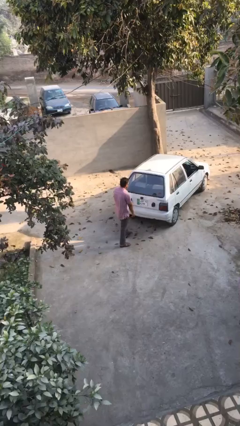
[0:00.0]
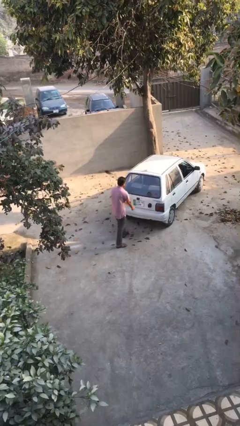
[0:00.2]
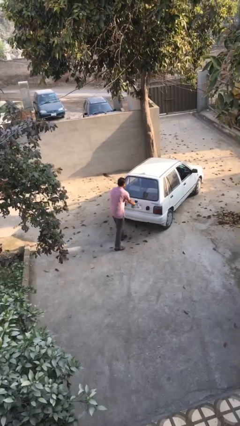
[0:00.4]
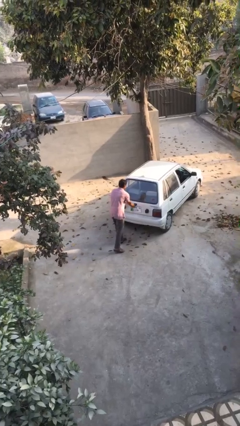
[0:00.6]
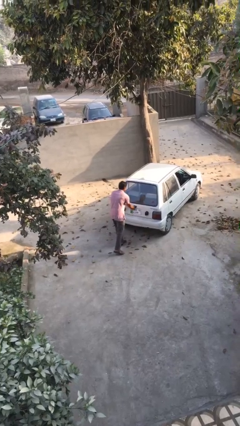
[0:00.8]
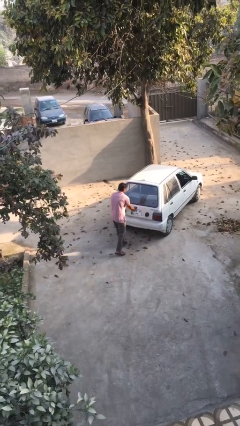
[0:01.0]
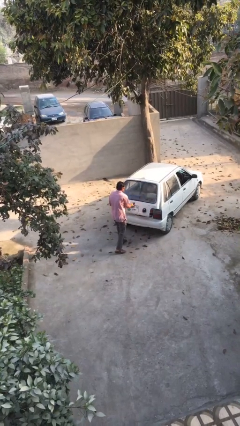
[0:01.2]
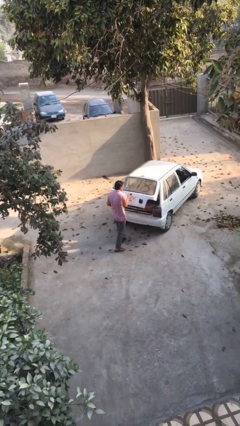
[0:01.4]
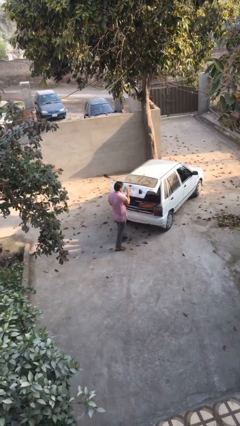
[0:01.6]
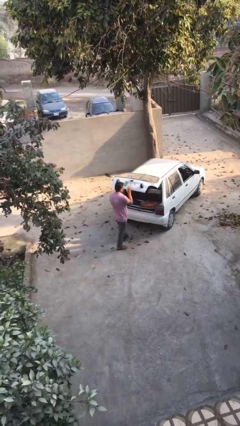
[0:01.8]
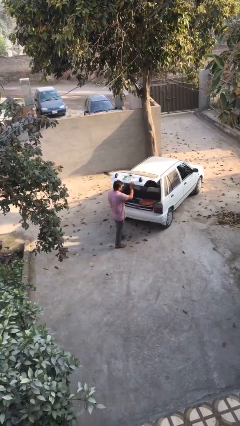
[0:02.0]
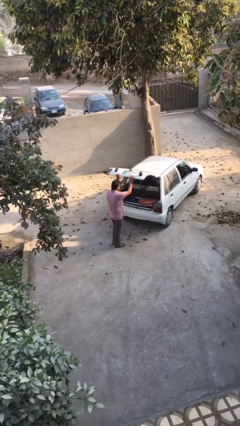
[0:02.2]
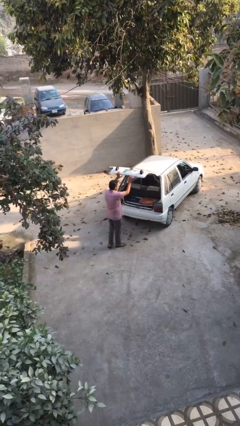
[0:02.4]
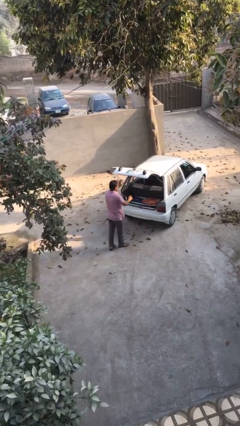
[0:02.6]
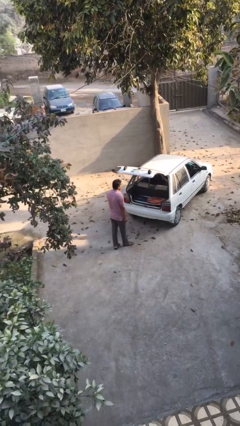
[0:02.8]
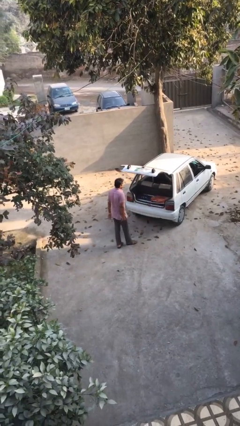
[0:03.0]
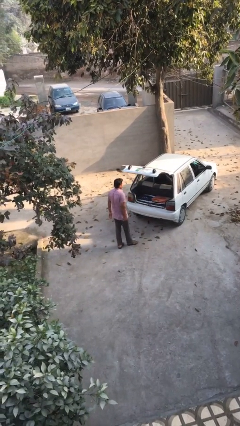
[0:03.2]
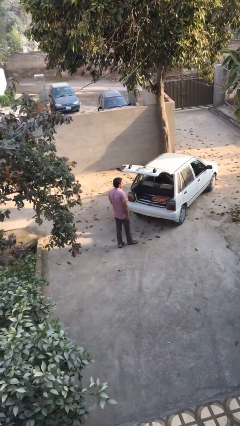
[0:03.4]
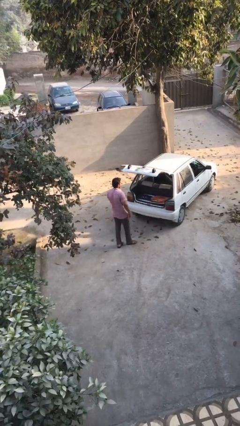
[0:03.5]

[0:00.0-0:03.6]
person opens car trunk

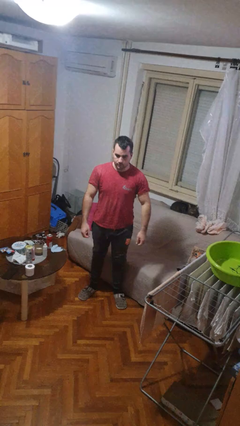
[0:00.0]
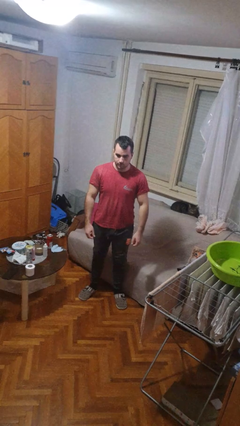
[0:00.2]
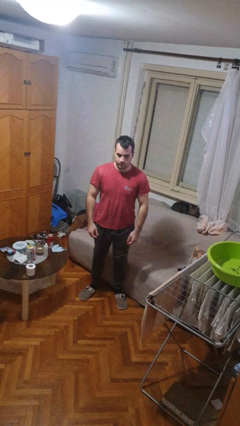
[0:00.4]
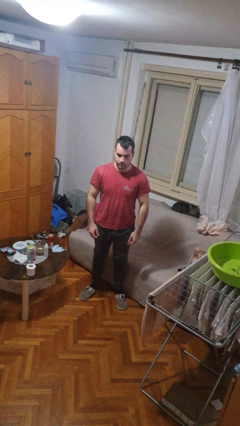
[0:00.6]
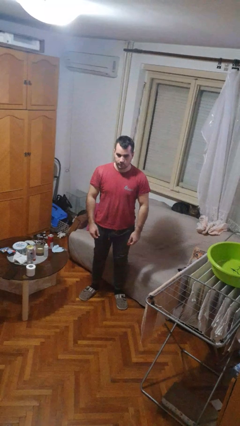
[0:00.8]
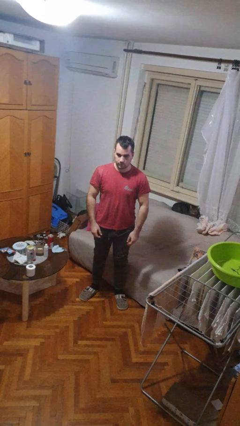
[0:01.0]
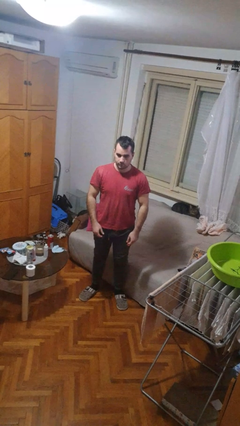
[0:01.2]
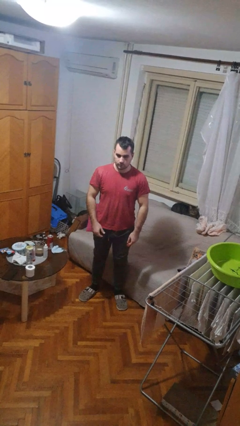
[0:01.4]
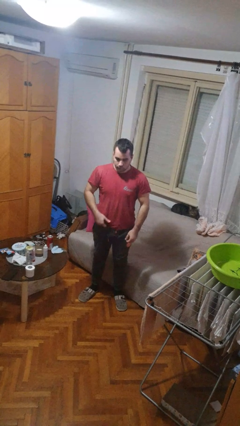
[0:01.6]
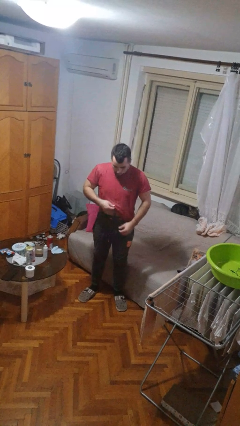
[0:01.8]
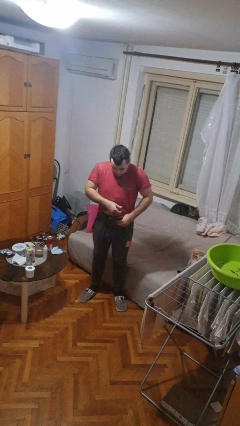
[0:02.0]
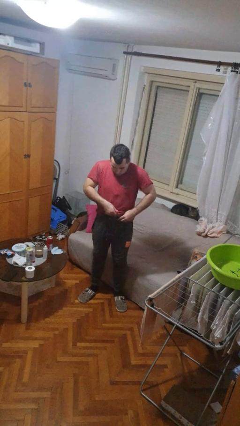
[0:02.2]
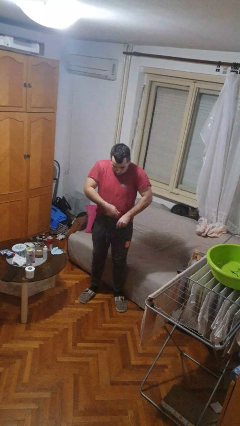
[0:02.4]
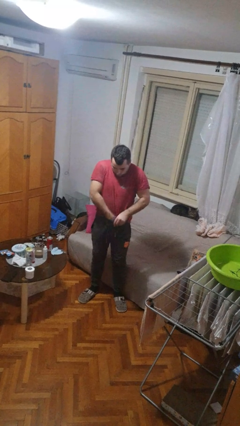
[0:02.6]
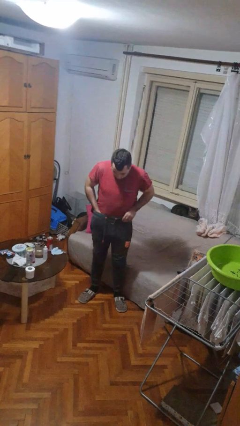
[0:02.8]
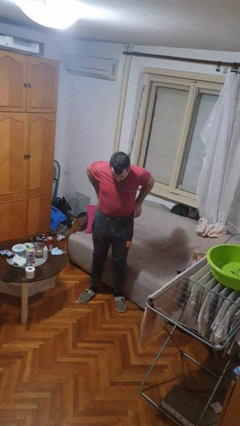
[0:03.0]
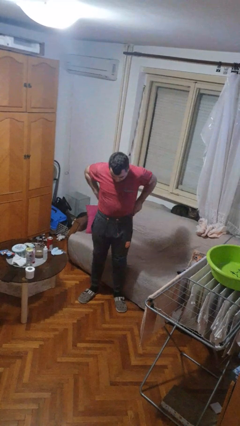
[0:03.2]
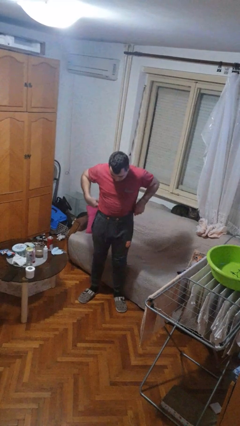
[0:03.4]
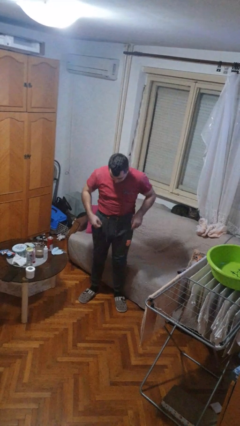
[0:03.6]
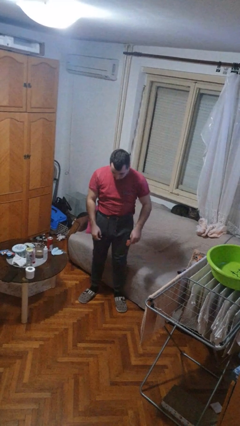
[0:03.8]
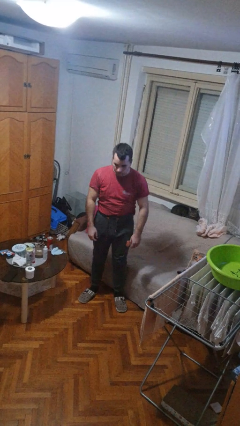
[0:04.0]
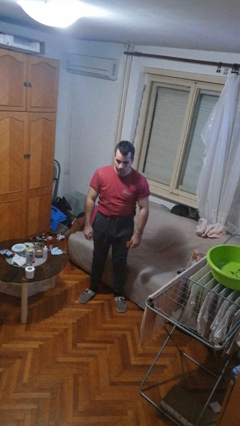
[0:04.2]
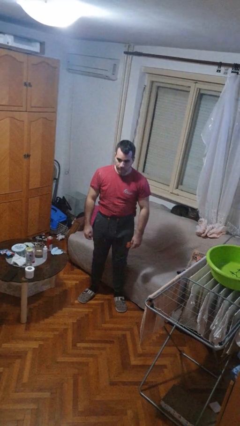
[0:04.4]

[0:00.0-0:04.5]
person tucks in shirt

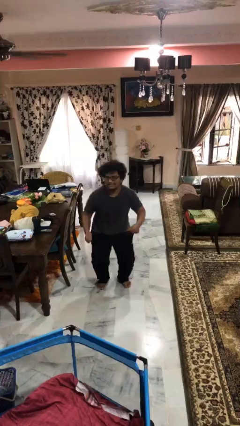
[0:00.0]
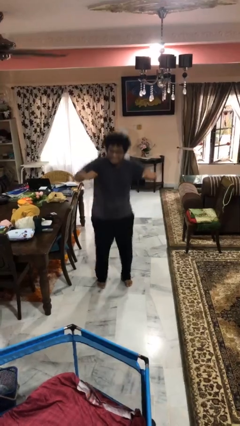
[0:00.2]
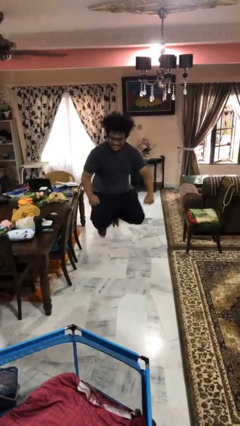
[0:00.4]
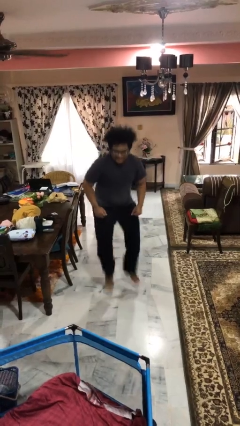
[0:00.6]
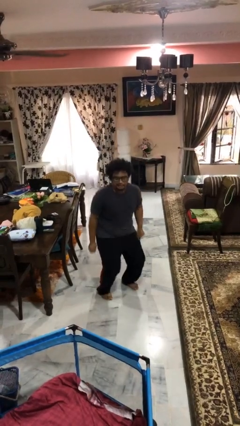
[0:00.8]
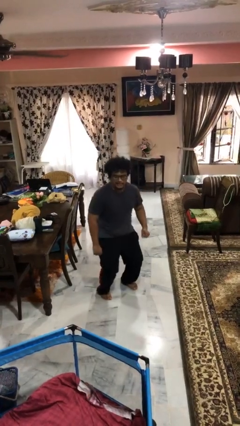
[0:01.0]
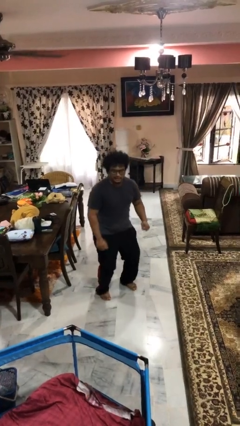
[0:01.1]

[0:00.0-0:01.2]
person jumps

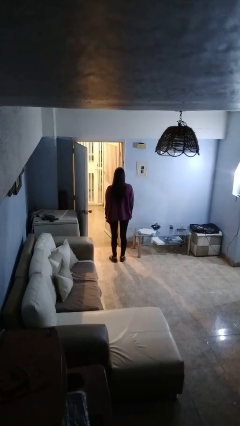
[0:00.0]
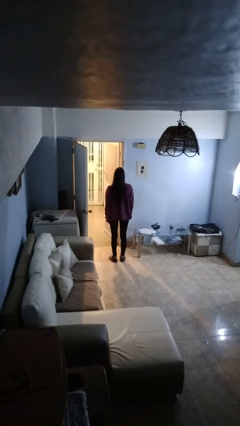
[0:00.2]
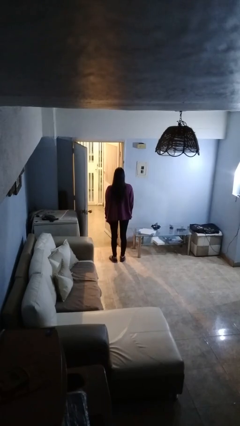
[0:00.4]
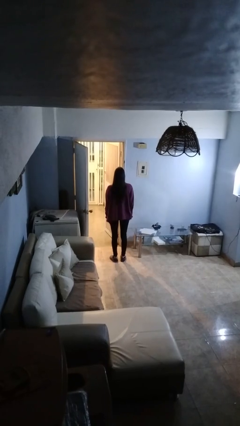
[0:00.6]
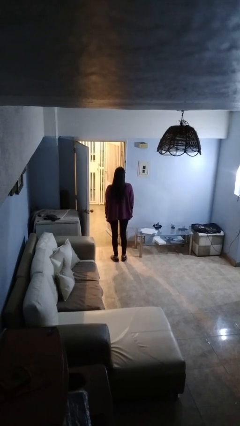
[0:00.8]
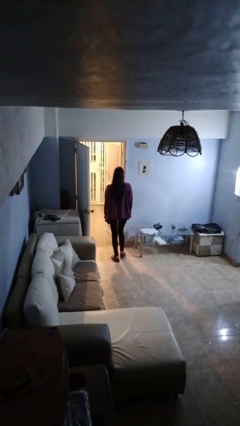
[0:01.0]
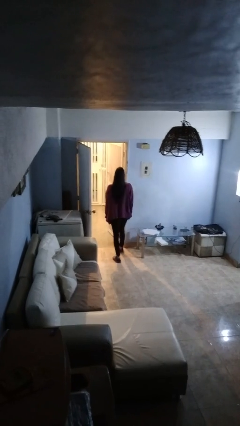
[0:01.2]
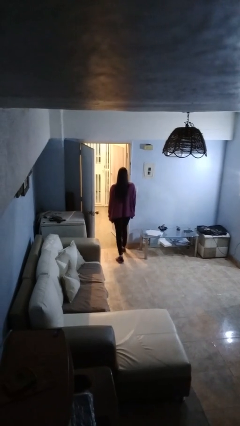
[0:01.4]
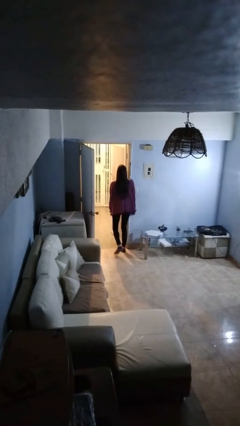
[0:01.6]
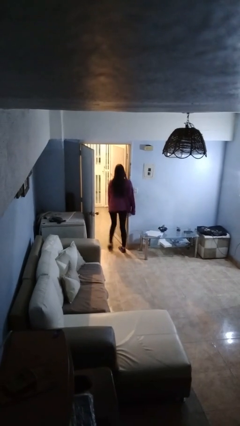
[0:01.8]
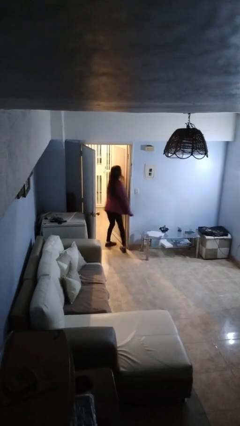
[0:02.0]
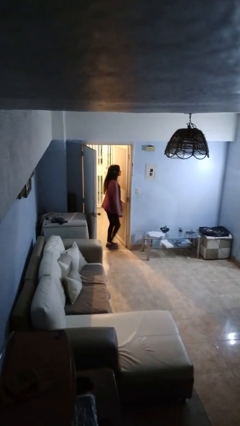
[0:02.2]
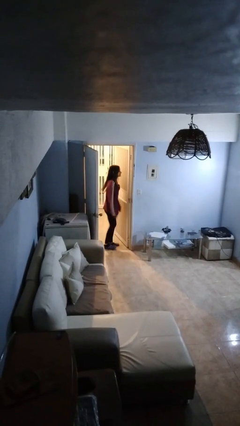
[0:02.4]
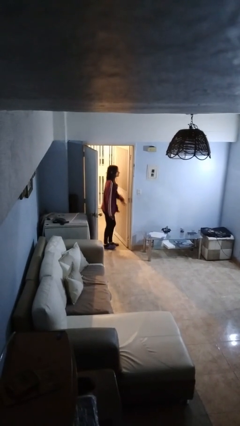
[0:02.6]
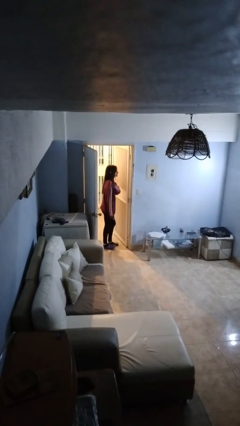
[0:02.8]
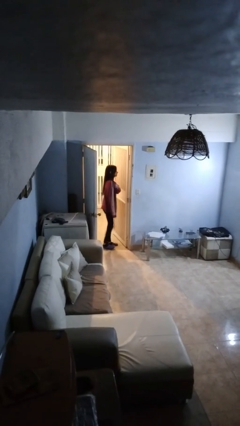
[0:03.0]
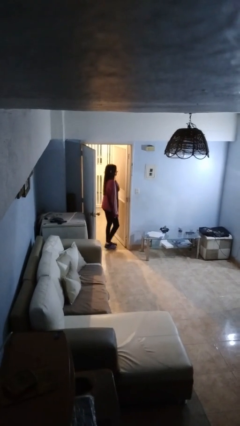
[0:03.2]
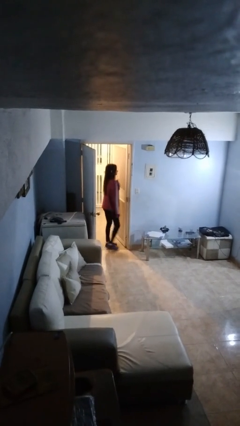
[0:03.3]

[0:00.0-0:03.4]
person bumps into wall

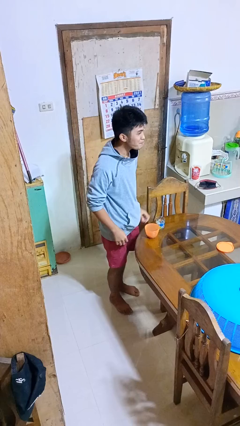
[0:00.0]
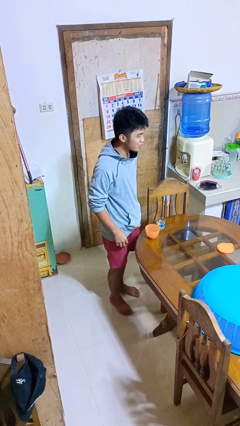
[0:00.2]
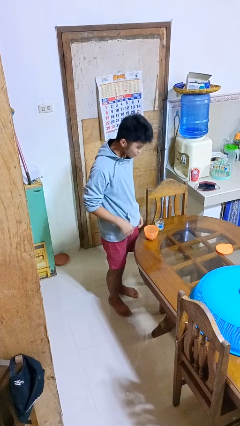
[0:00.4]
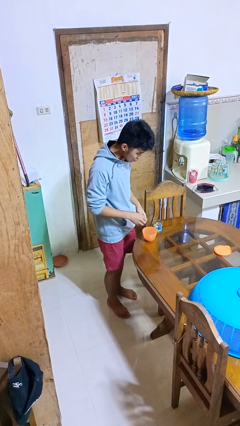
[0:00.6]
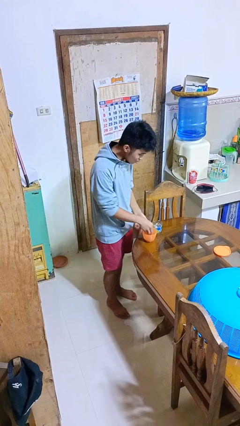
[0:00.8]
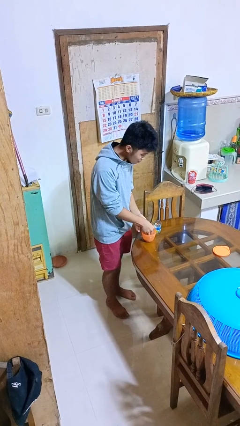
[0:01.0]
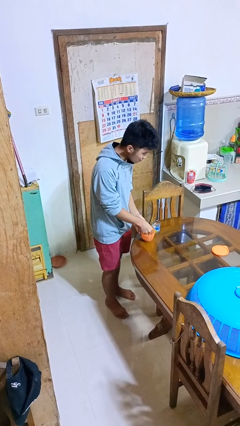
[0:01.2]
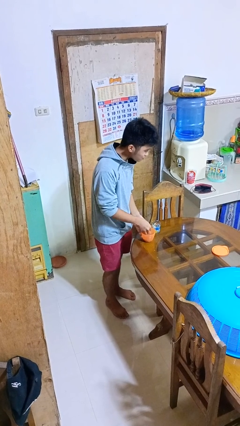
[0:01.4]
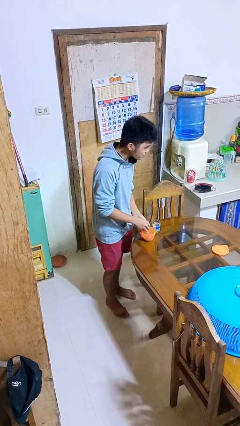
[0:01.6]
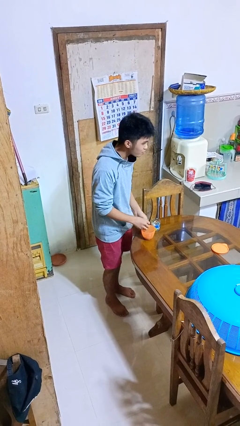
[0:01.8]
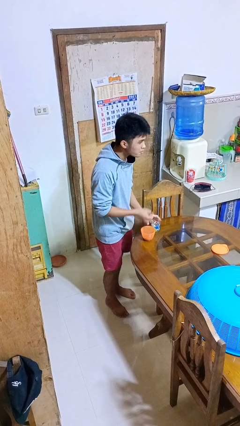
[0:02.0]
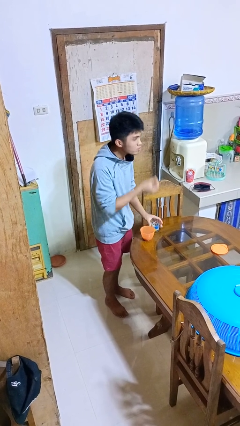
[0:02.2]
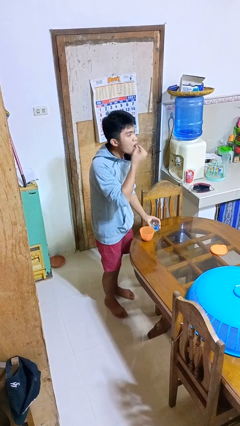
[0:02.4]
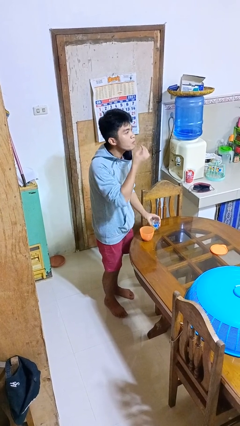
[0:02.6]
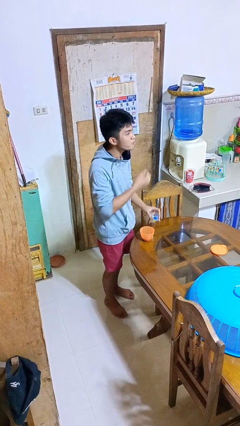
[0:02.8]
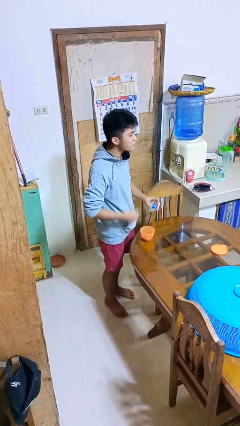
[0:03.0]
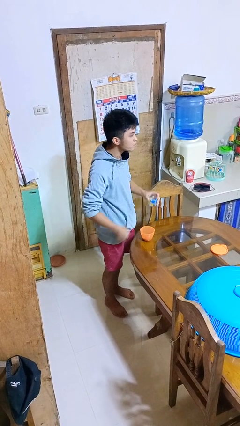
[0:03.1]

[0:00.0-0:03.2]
person takes medicine pills

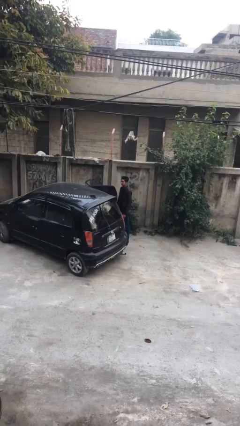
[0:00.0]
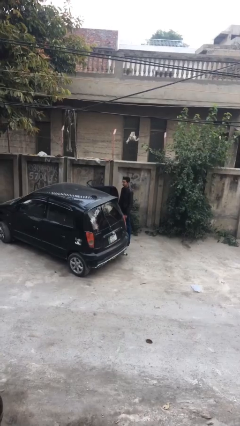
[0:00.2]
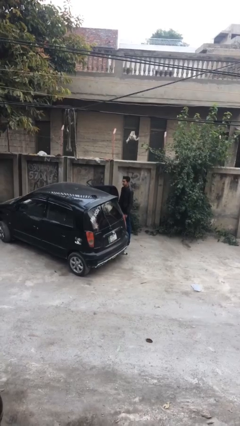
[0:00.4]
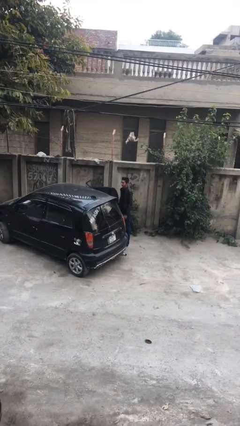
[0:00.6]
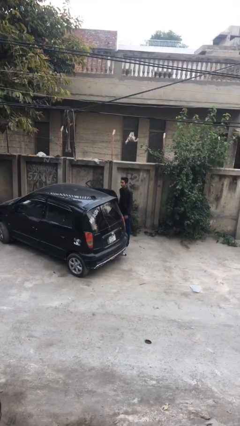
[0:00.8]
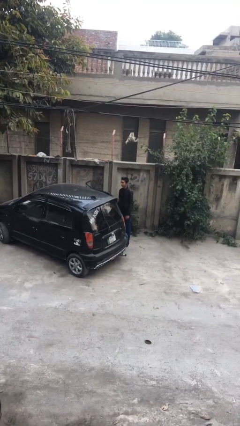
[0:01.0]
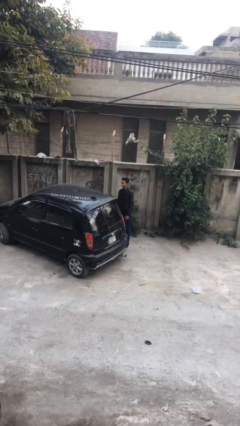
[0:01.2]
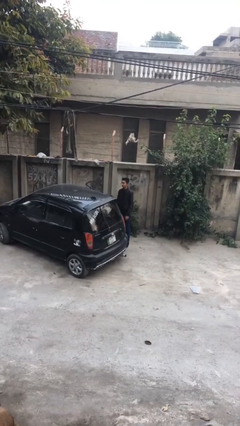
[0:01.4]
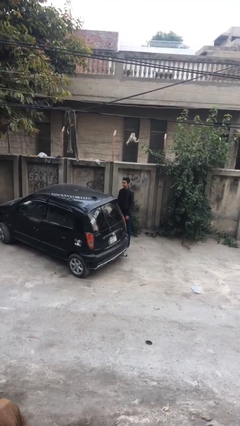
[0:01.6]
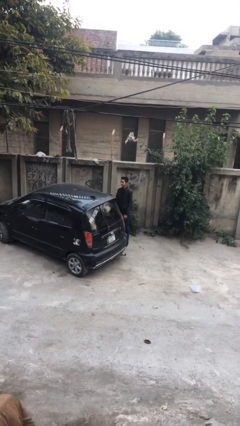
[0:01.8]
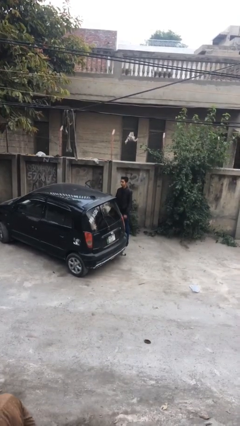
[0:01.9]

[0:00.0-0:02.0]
person closes car door
